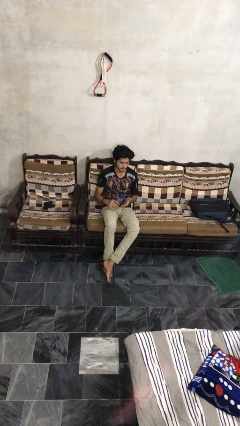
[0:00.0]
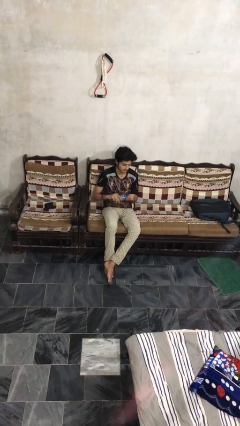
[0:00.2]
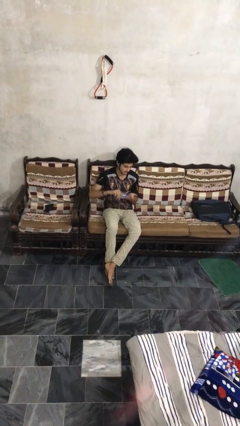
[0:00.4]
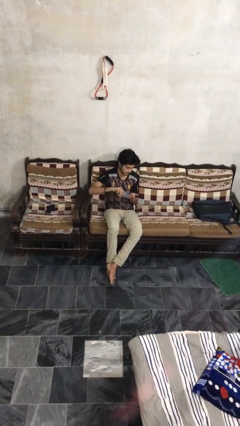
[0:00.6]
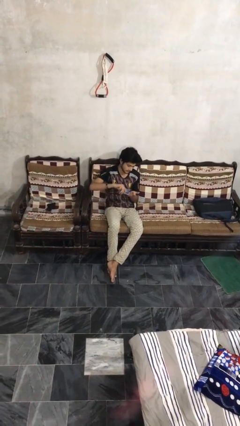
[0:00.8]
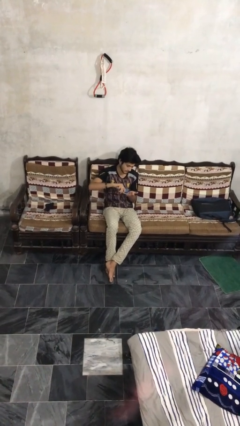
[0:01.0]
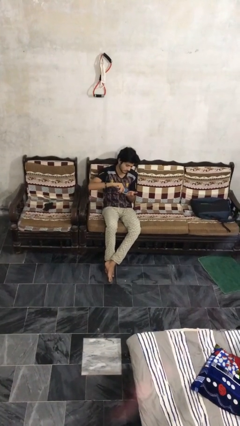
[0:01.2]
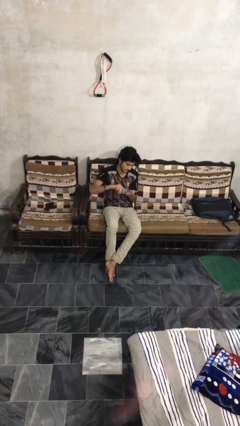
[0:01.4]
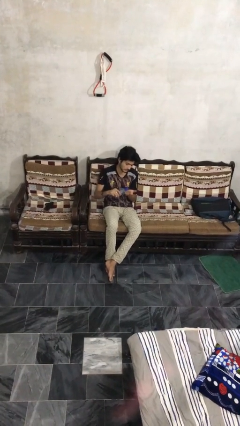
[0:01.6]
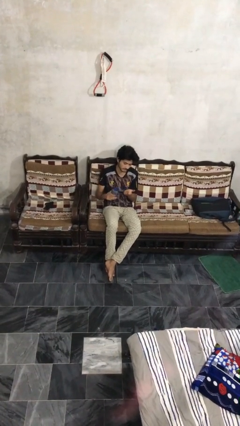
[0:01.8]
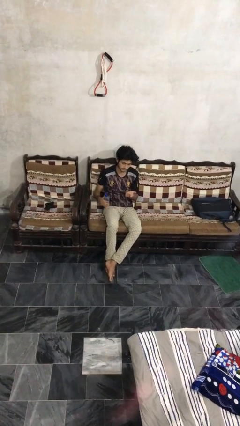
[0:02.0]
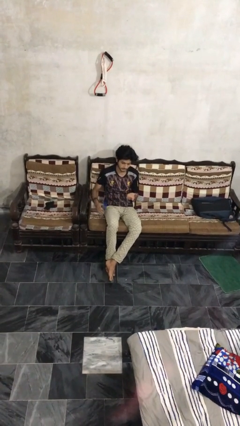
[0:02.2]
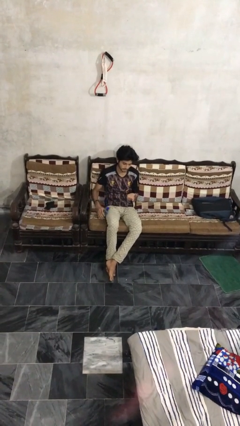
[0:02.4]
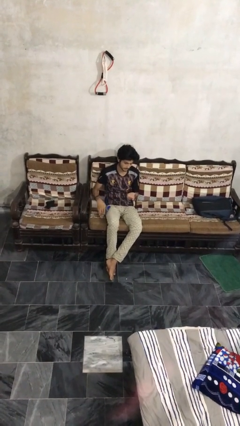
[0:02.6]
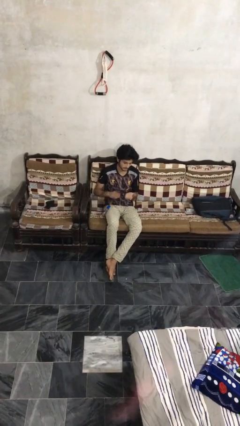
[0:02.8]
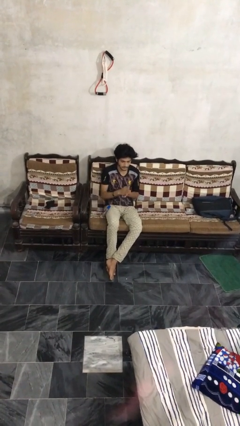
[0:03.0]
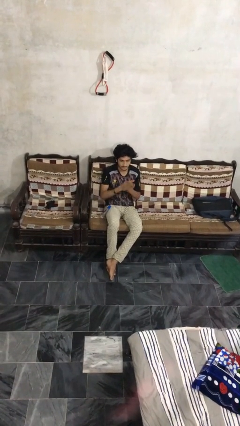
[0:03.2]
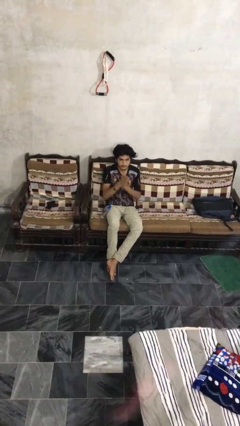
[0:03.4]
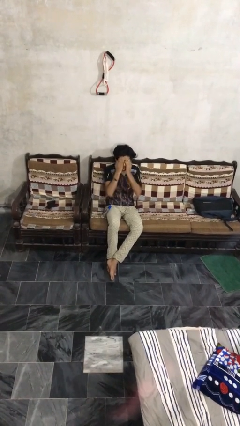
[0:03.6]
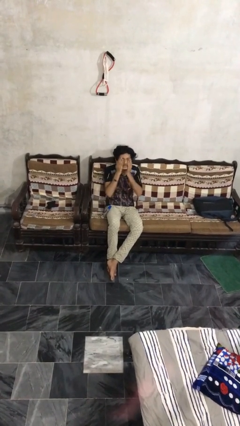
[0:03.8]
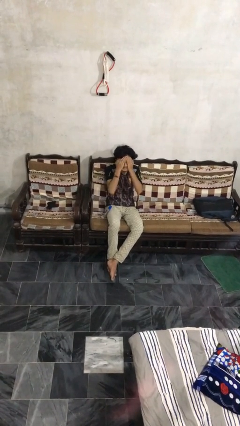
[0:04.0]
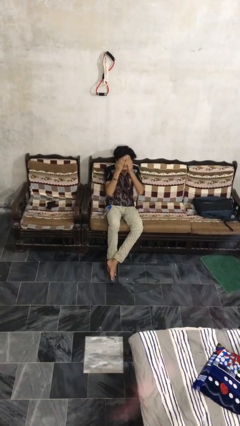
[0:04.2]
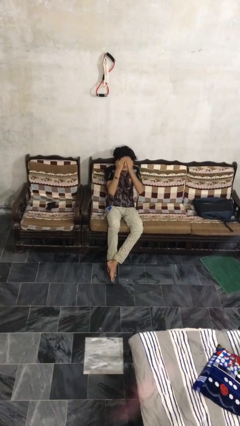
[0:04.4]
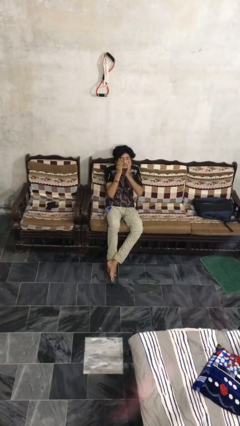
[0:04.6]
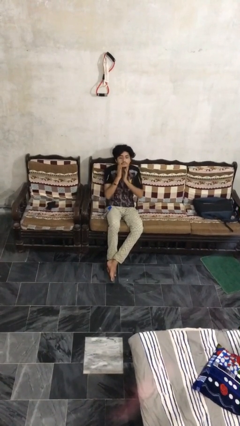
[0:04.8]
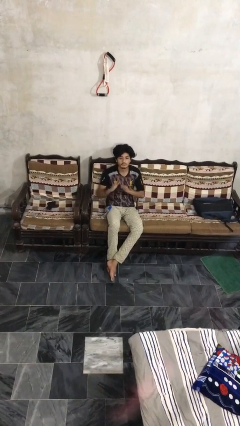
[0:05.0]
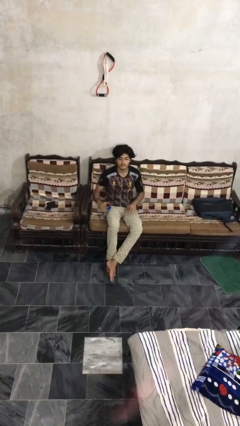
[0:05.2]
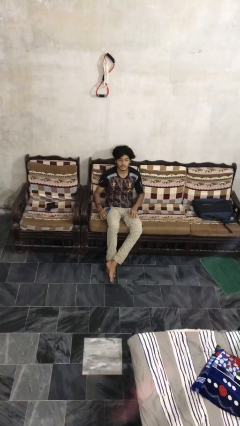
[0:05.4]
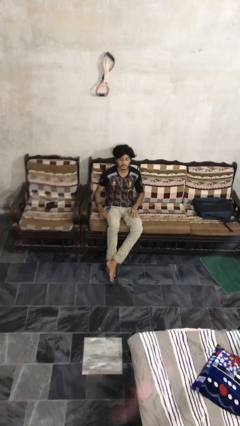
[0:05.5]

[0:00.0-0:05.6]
person applies facial moisturizer

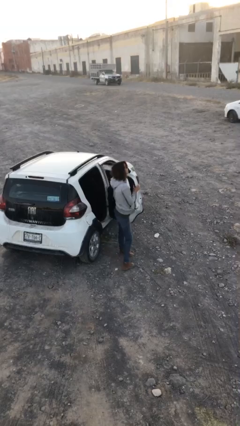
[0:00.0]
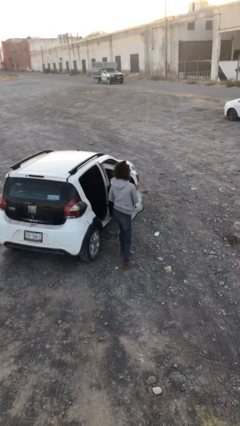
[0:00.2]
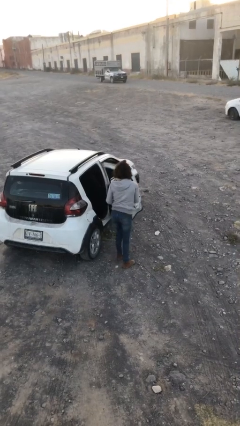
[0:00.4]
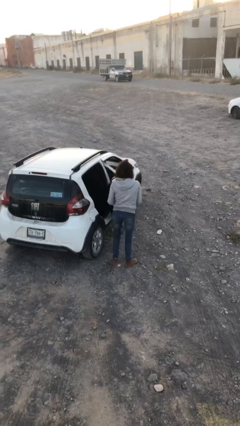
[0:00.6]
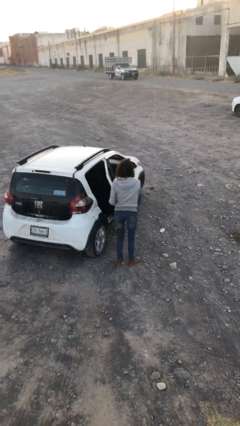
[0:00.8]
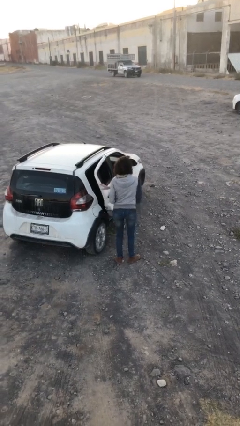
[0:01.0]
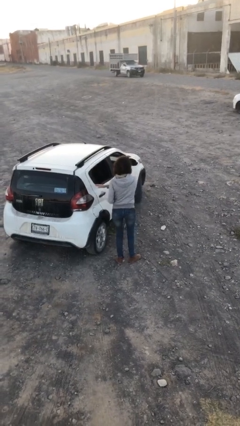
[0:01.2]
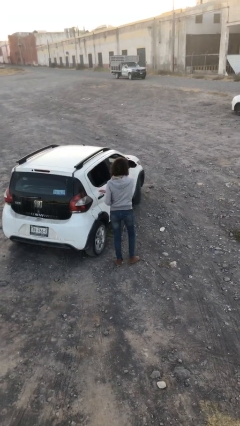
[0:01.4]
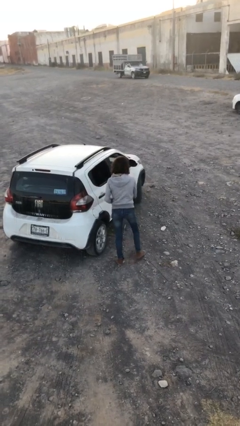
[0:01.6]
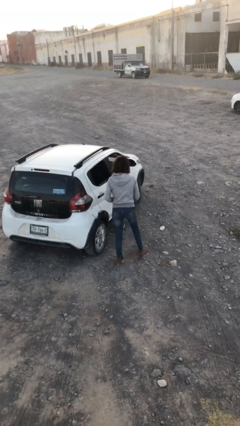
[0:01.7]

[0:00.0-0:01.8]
person closes car door

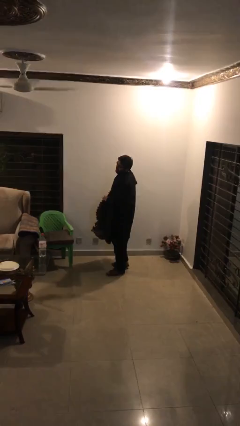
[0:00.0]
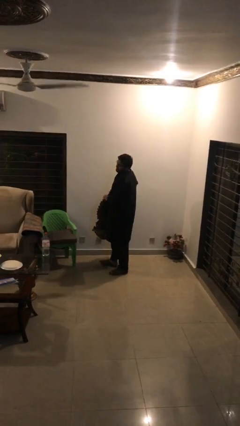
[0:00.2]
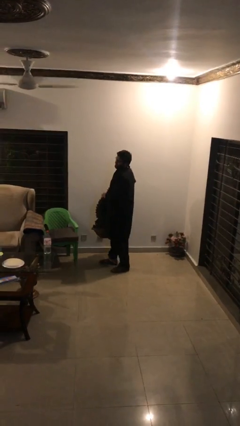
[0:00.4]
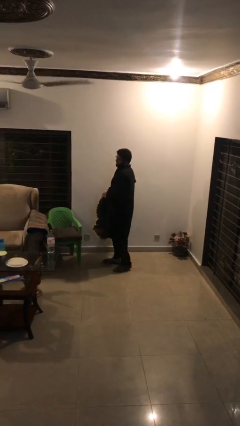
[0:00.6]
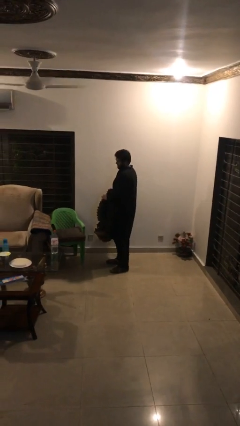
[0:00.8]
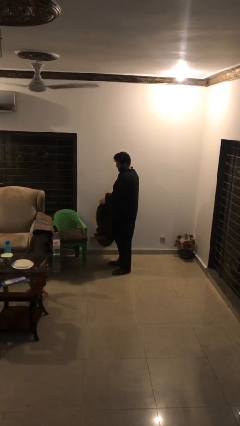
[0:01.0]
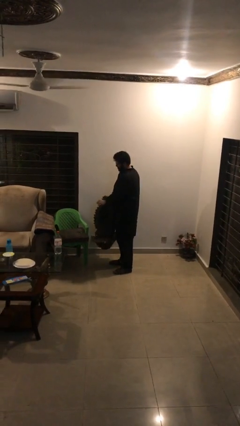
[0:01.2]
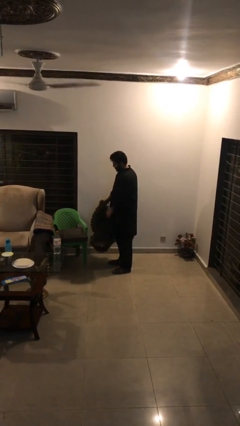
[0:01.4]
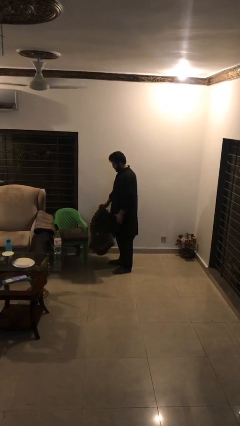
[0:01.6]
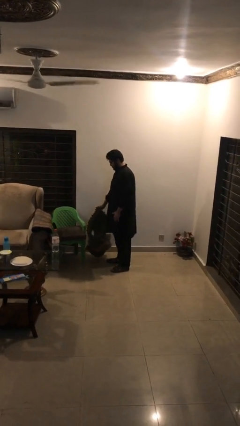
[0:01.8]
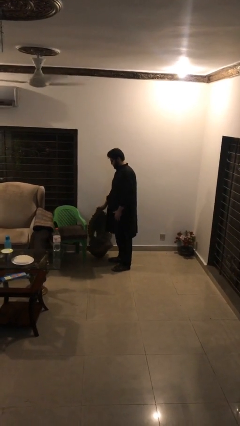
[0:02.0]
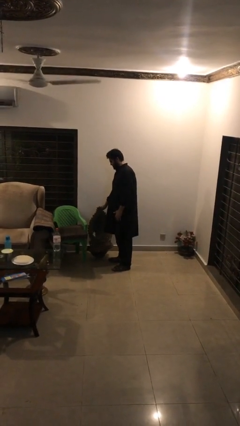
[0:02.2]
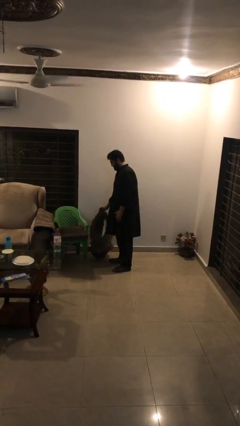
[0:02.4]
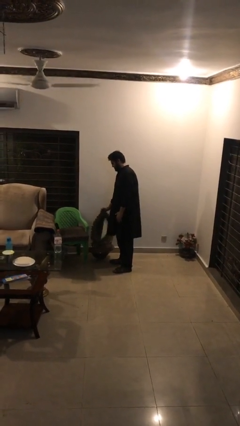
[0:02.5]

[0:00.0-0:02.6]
person puts down object on floor

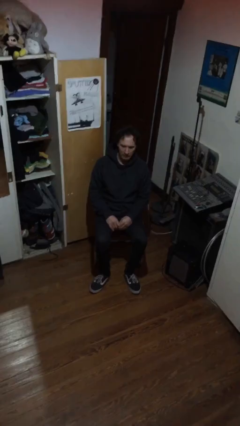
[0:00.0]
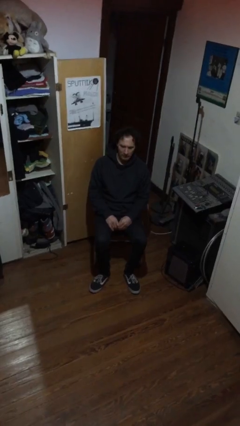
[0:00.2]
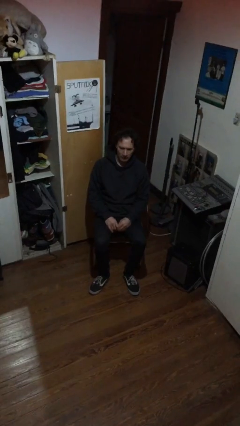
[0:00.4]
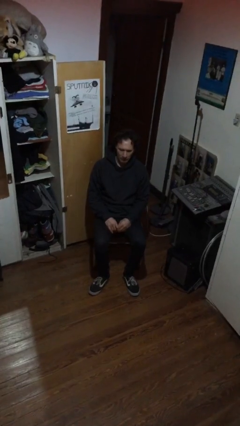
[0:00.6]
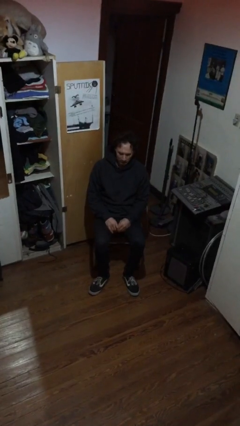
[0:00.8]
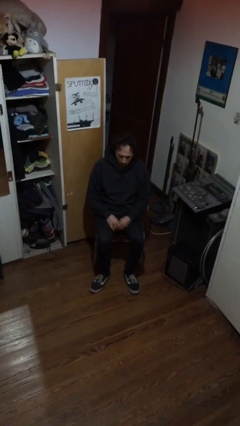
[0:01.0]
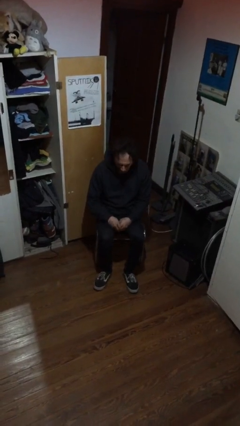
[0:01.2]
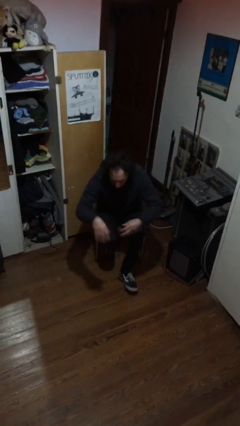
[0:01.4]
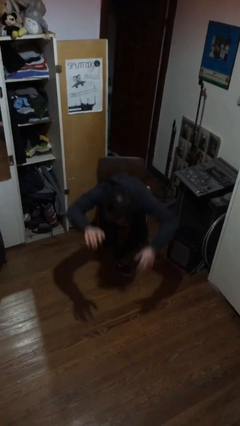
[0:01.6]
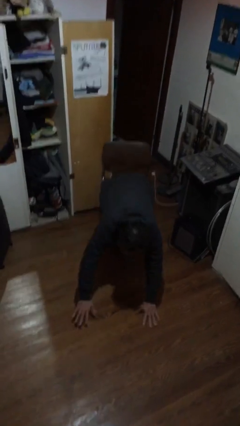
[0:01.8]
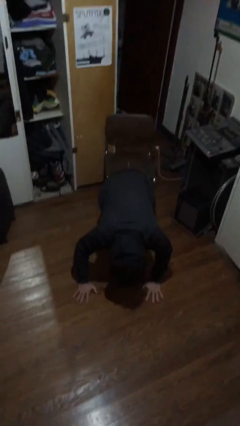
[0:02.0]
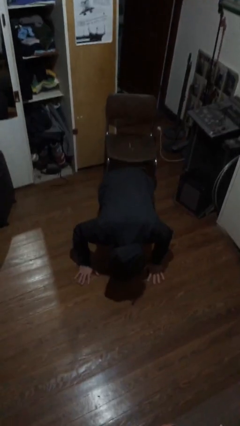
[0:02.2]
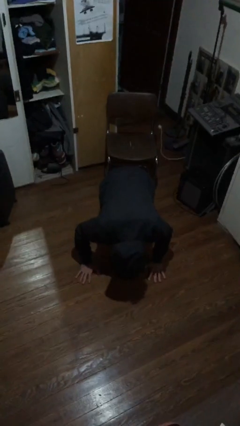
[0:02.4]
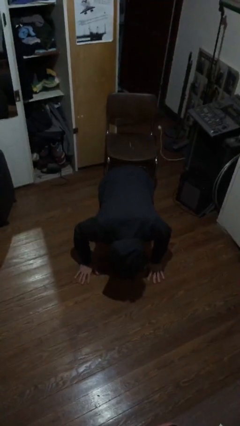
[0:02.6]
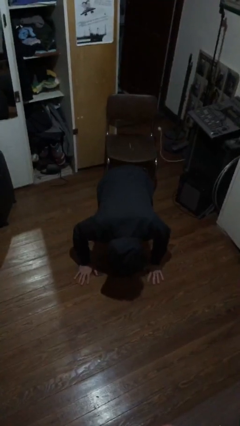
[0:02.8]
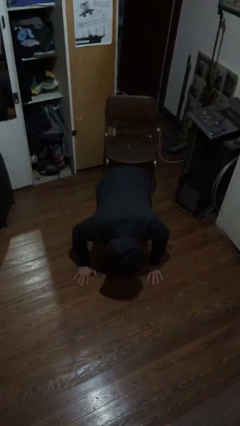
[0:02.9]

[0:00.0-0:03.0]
person falls from chair

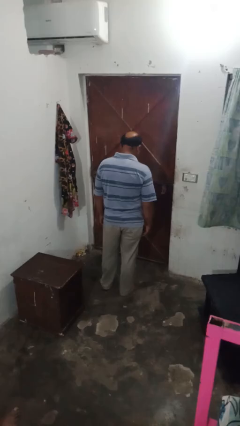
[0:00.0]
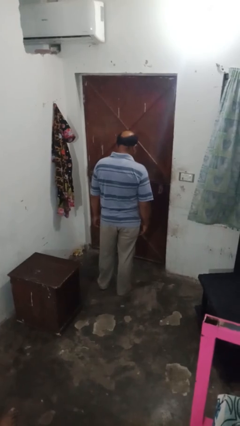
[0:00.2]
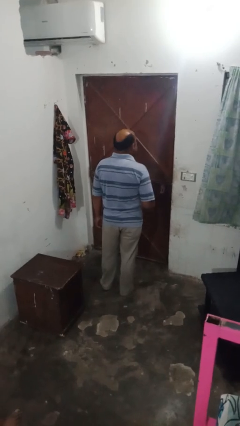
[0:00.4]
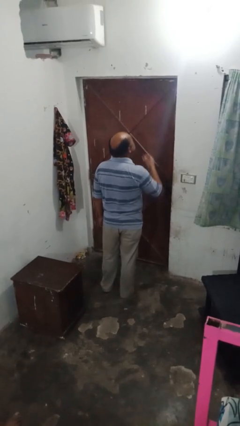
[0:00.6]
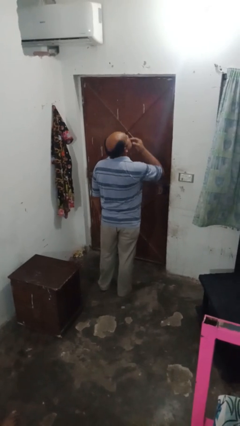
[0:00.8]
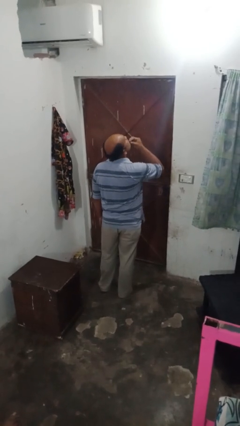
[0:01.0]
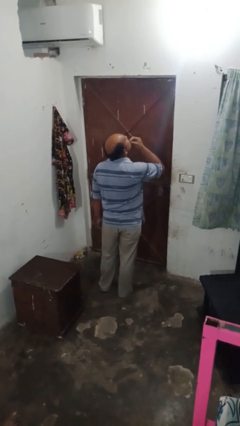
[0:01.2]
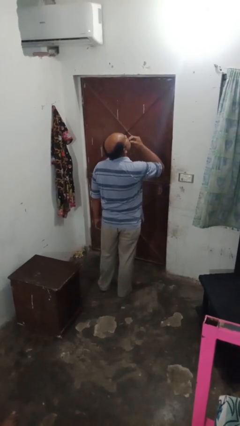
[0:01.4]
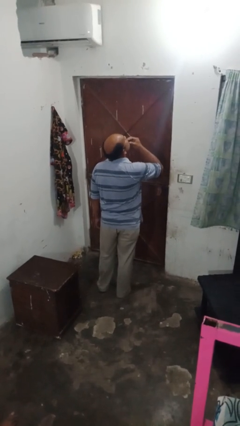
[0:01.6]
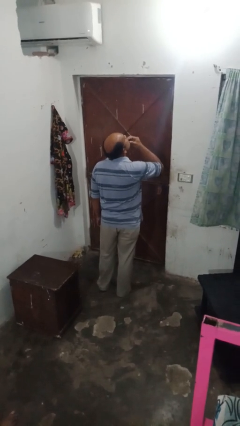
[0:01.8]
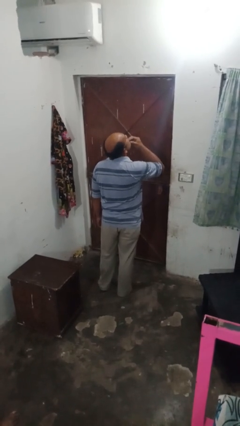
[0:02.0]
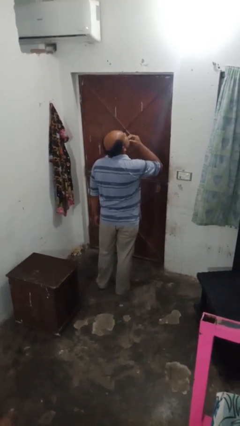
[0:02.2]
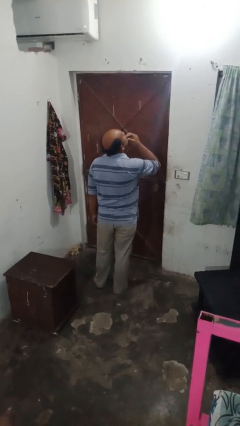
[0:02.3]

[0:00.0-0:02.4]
person strokes chin

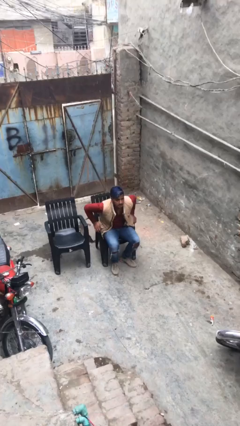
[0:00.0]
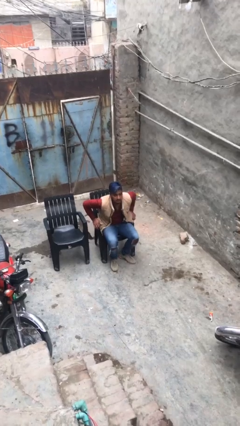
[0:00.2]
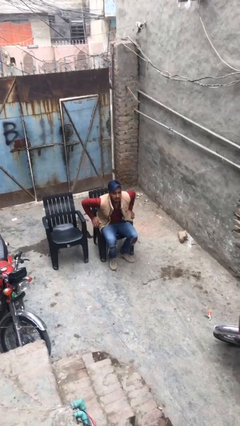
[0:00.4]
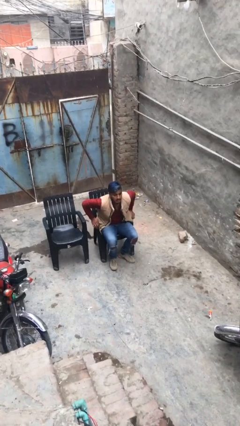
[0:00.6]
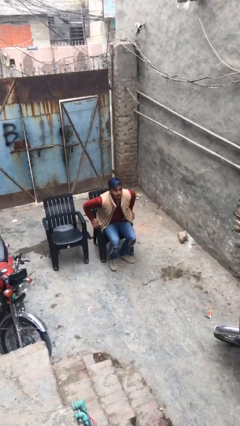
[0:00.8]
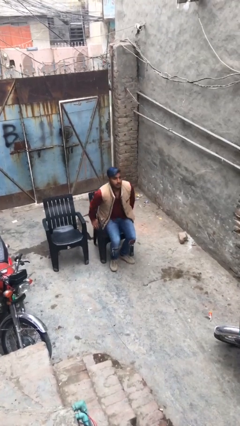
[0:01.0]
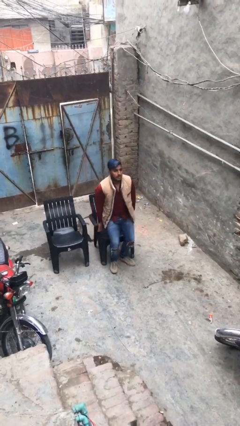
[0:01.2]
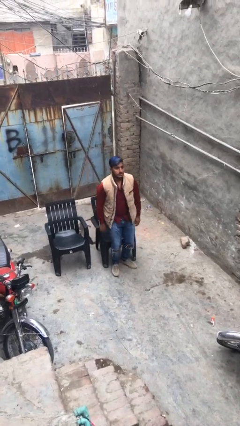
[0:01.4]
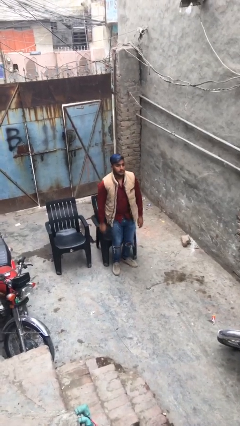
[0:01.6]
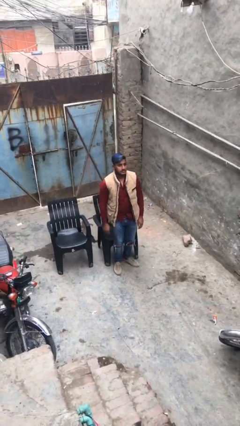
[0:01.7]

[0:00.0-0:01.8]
person stands up
